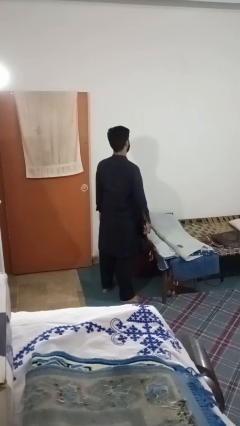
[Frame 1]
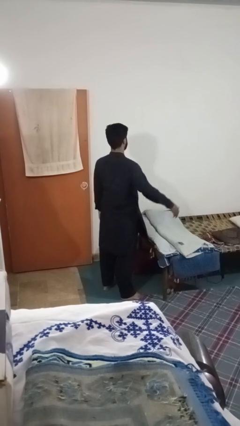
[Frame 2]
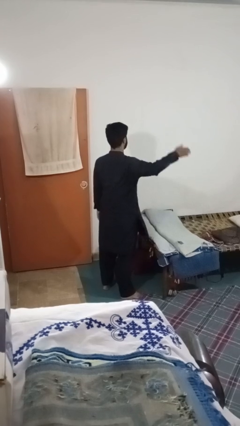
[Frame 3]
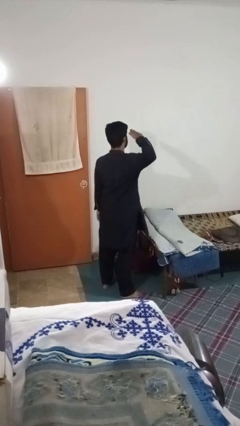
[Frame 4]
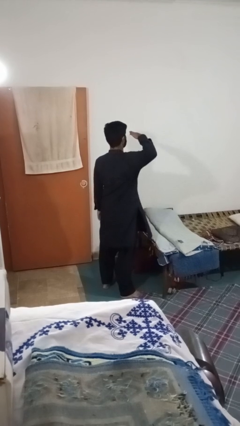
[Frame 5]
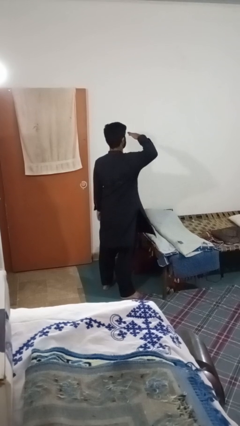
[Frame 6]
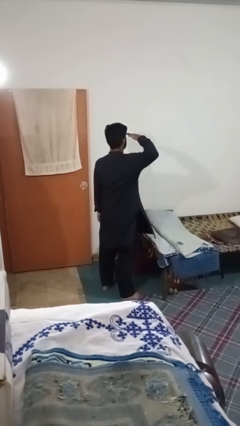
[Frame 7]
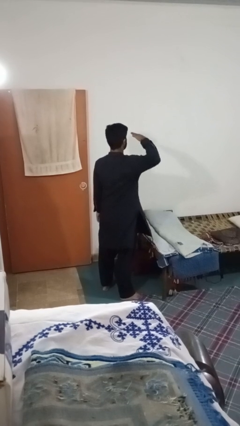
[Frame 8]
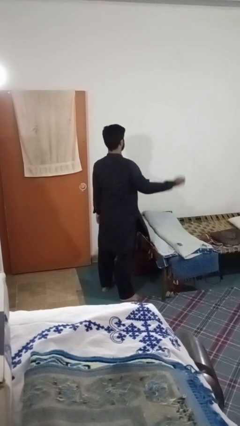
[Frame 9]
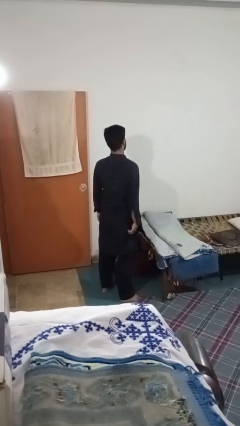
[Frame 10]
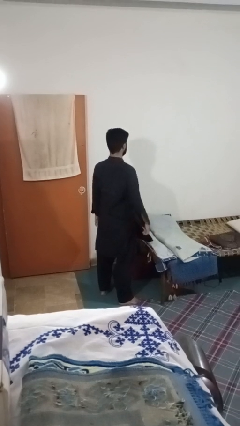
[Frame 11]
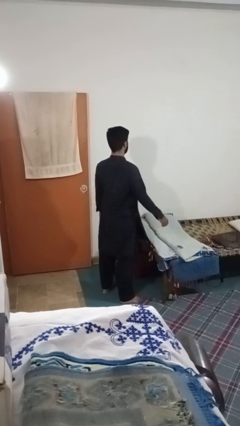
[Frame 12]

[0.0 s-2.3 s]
person salutes

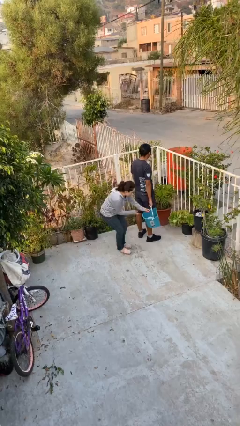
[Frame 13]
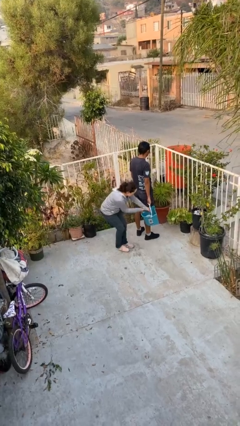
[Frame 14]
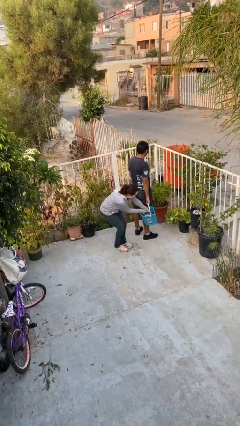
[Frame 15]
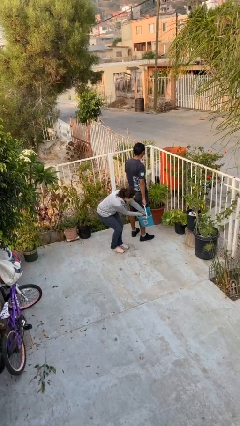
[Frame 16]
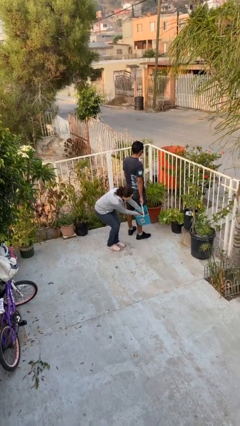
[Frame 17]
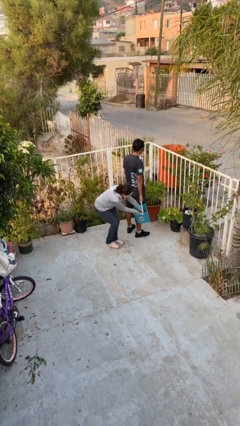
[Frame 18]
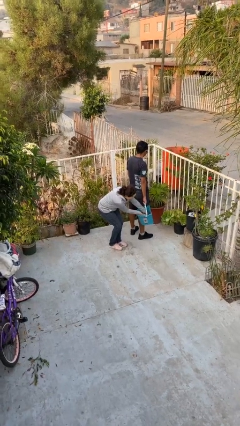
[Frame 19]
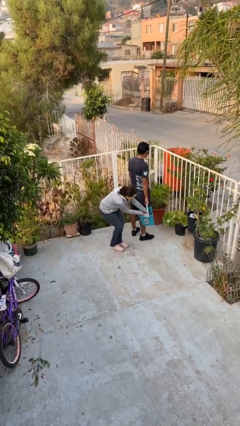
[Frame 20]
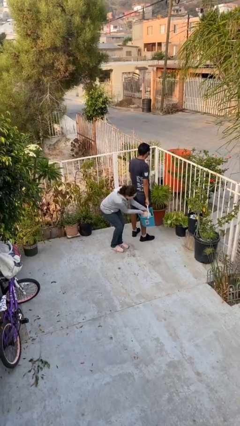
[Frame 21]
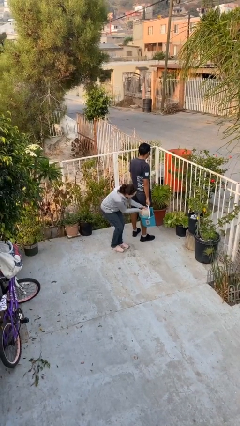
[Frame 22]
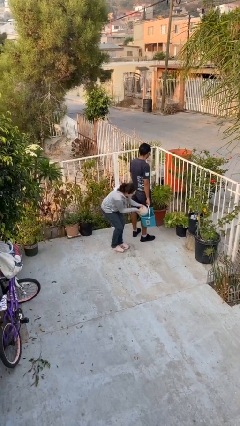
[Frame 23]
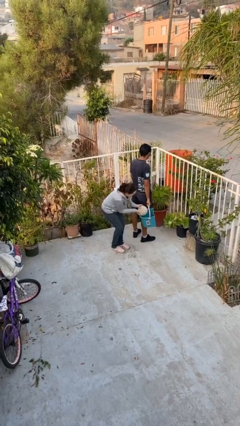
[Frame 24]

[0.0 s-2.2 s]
person steals object from person

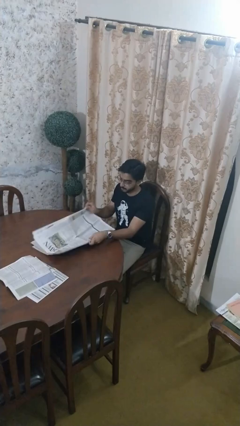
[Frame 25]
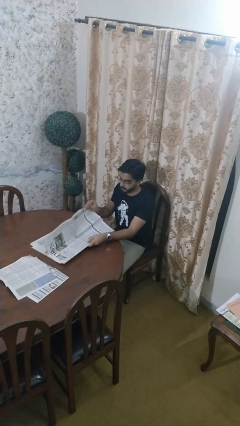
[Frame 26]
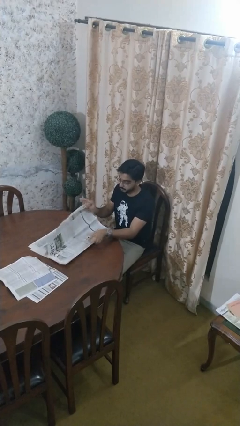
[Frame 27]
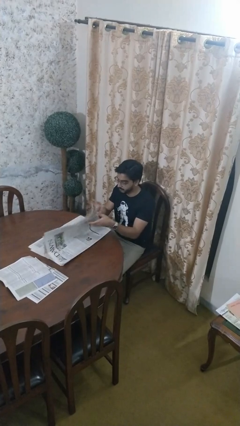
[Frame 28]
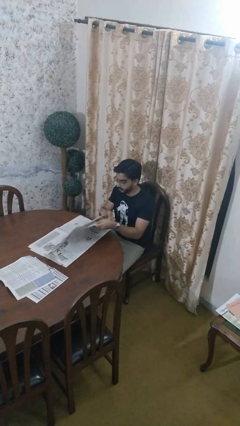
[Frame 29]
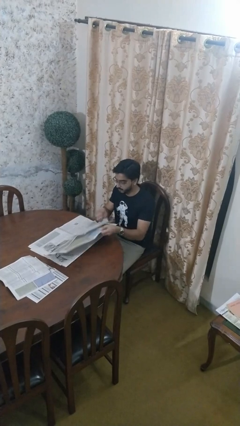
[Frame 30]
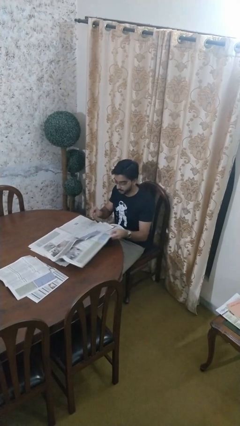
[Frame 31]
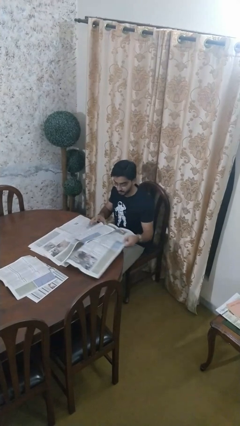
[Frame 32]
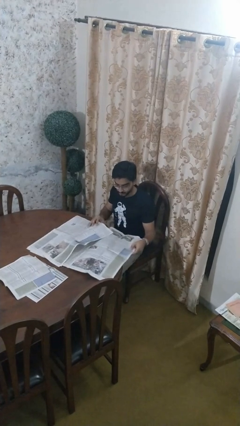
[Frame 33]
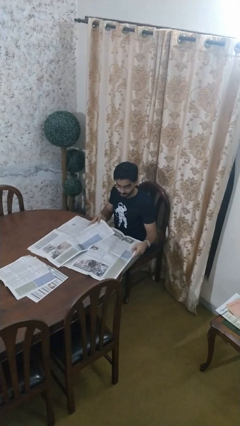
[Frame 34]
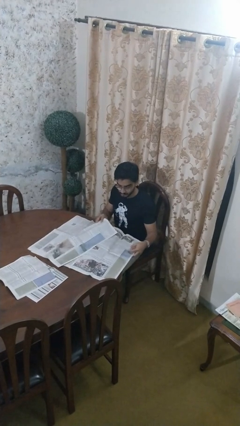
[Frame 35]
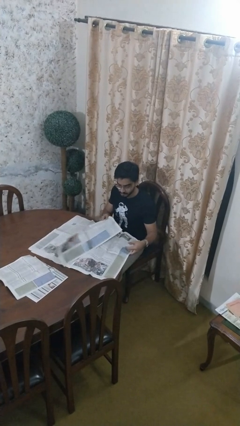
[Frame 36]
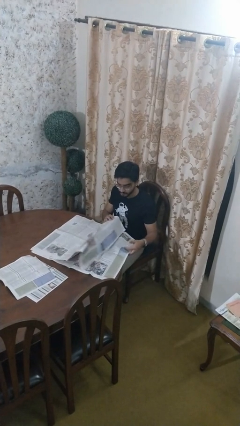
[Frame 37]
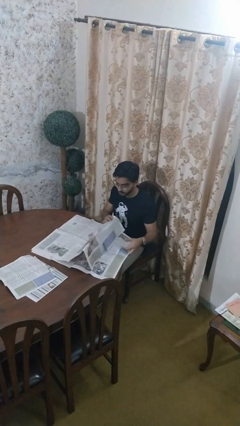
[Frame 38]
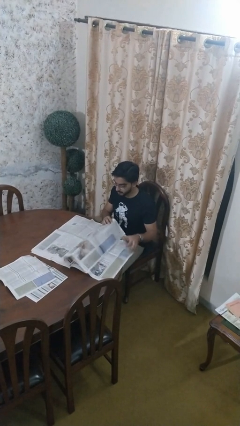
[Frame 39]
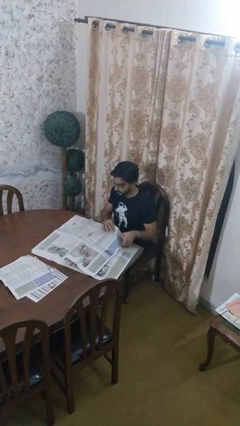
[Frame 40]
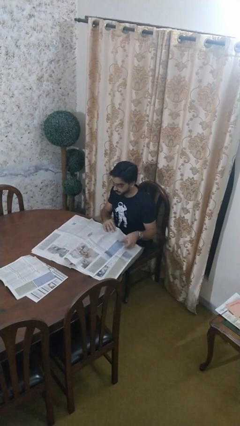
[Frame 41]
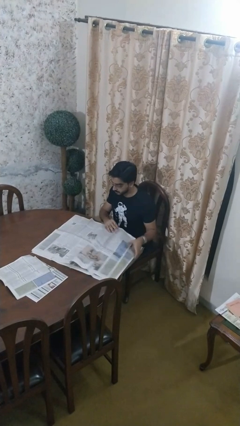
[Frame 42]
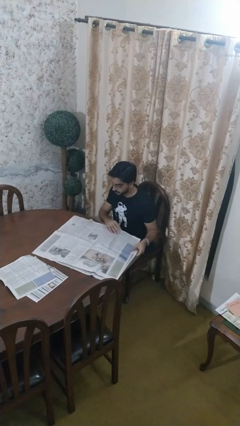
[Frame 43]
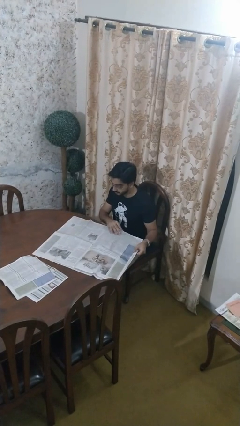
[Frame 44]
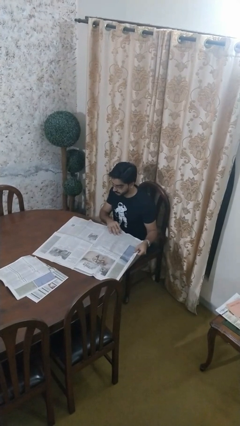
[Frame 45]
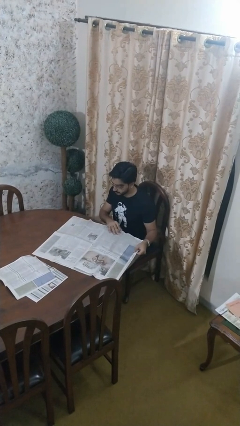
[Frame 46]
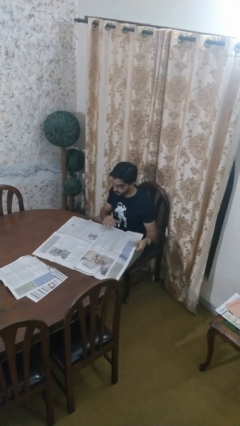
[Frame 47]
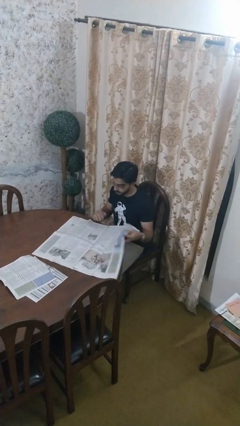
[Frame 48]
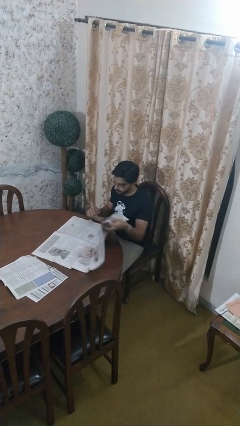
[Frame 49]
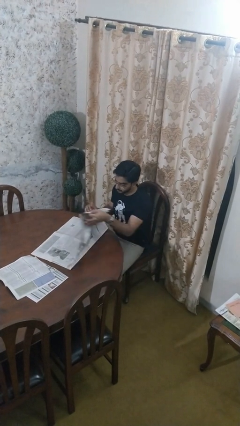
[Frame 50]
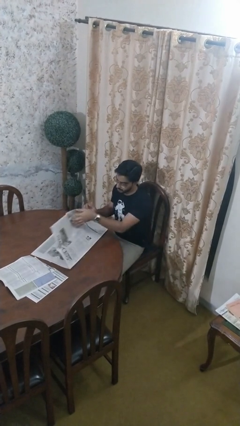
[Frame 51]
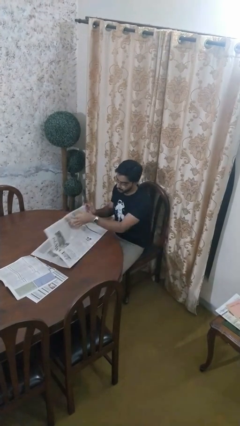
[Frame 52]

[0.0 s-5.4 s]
person reads newspaper

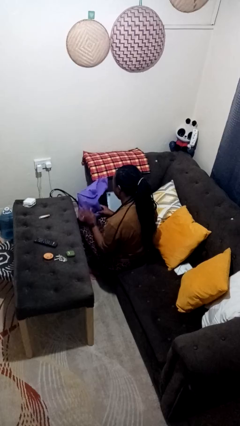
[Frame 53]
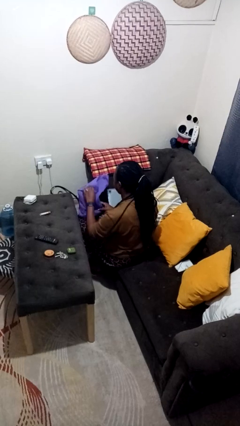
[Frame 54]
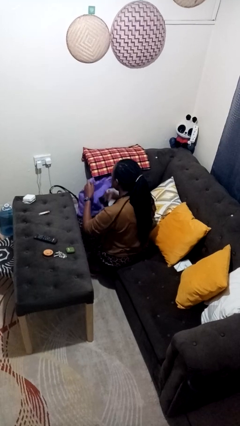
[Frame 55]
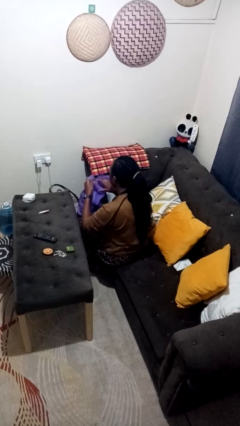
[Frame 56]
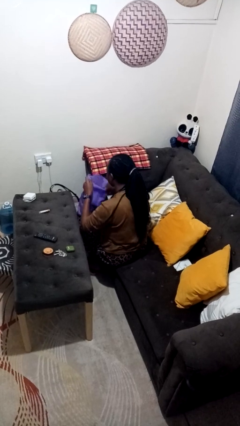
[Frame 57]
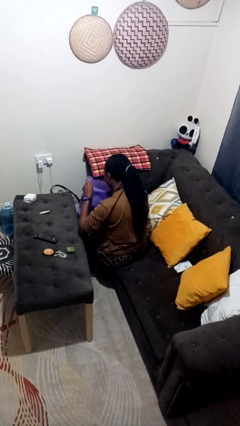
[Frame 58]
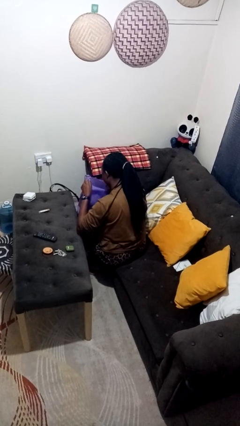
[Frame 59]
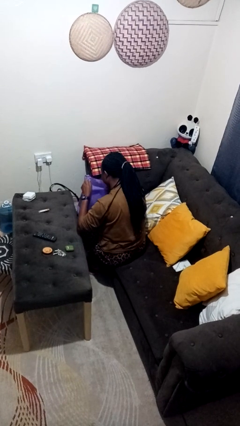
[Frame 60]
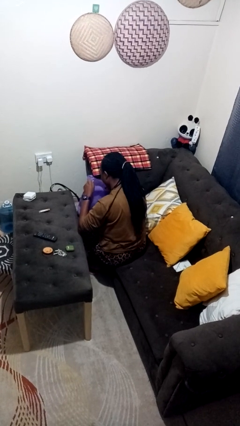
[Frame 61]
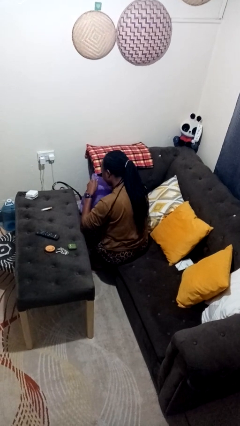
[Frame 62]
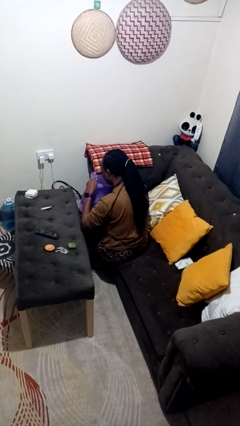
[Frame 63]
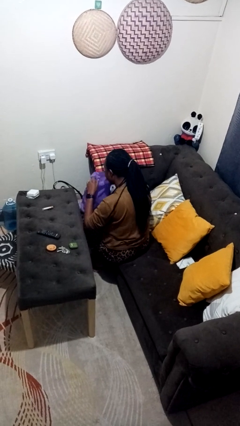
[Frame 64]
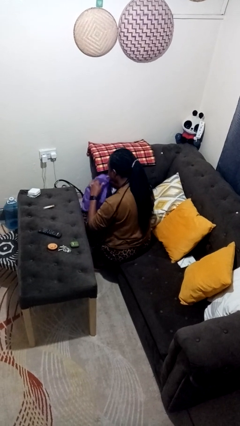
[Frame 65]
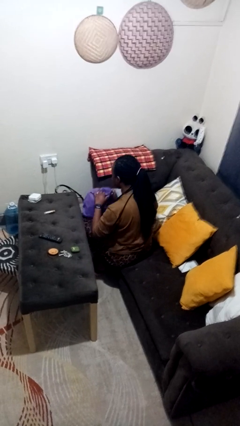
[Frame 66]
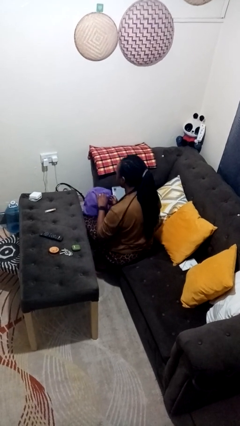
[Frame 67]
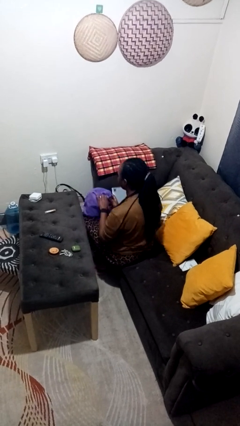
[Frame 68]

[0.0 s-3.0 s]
person searches in bag

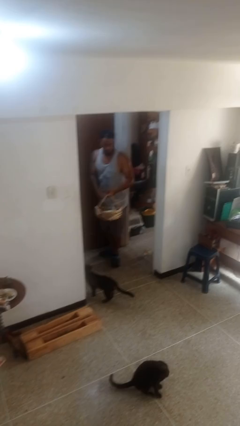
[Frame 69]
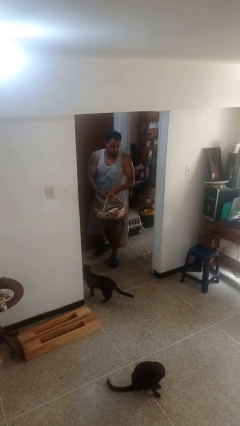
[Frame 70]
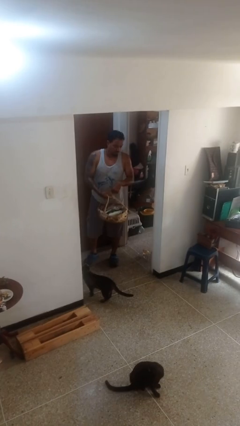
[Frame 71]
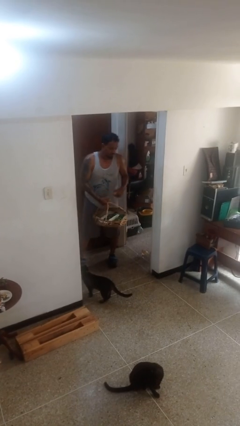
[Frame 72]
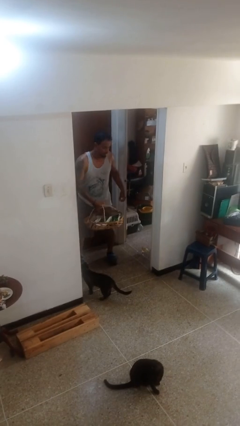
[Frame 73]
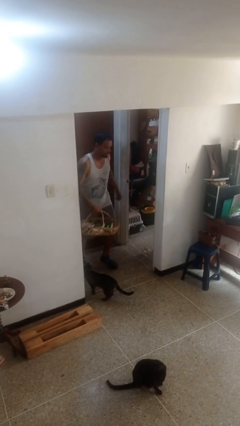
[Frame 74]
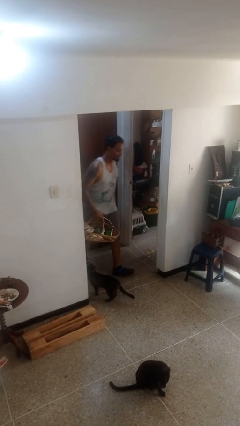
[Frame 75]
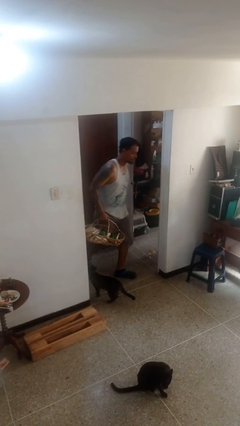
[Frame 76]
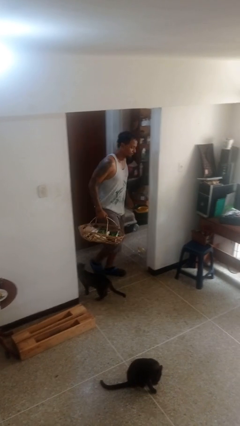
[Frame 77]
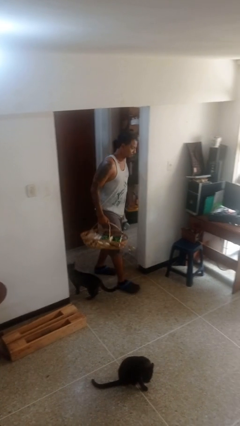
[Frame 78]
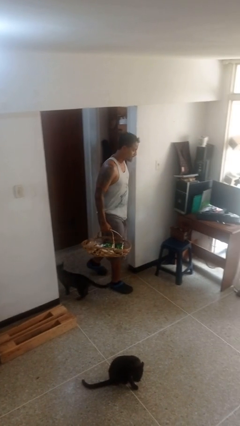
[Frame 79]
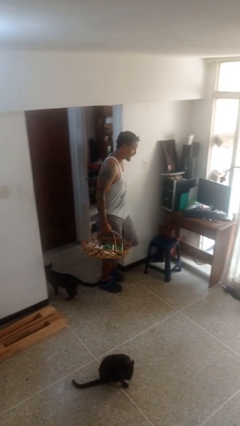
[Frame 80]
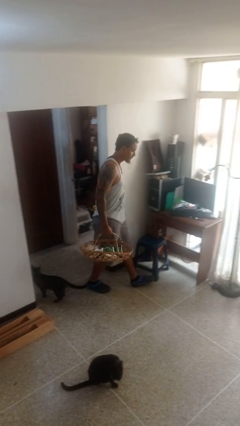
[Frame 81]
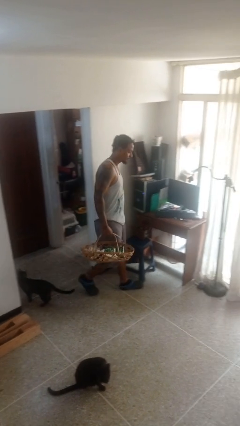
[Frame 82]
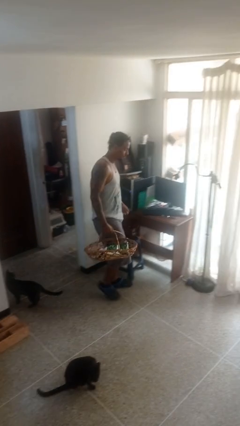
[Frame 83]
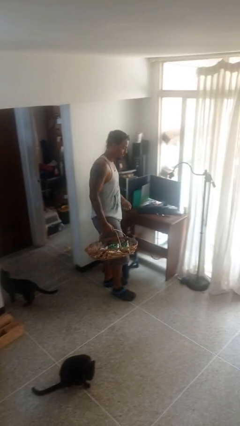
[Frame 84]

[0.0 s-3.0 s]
person carries groceries

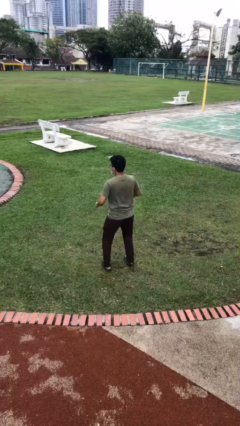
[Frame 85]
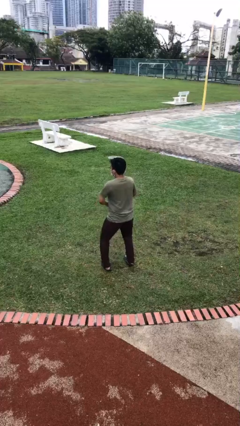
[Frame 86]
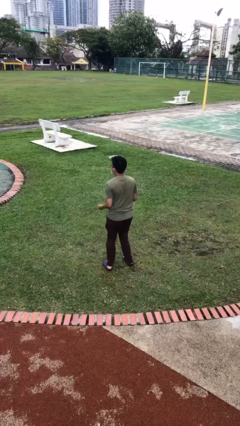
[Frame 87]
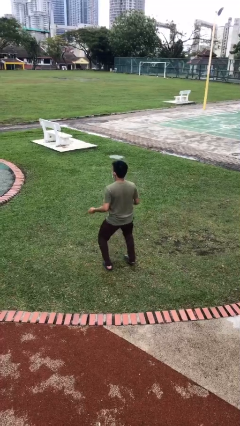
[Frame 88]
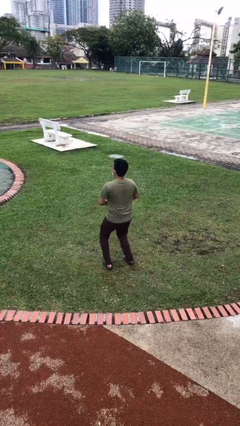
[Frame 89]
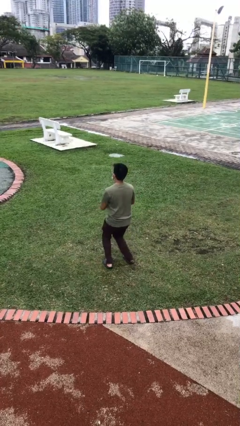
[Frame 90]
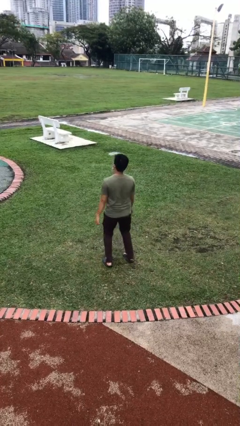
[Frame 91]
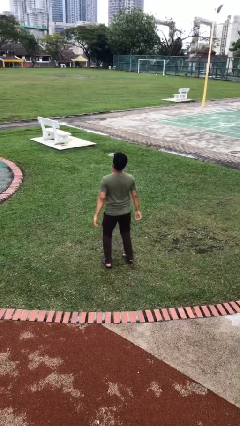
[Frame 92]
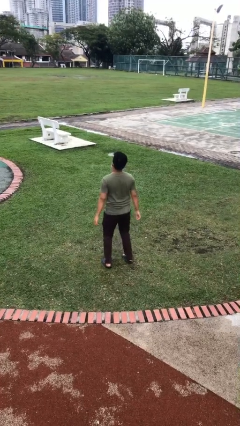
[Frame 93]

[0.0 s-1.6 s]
person dances in place

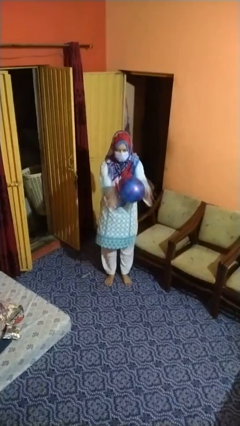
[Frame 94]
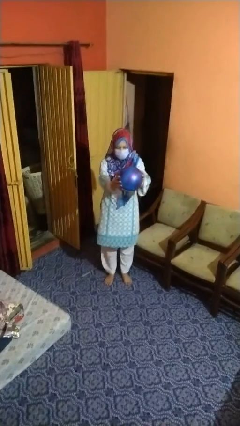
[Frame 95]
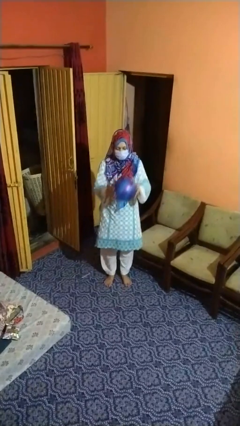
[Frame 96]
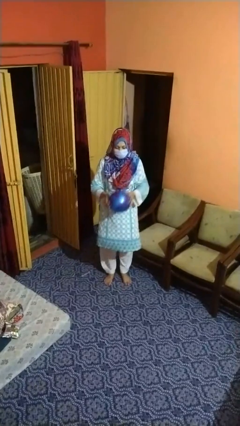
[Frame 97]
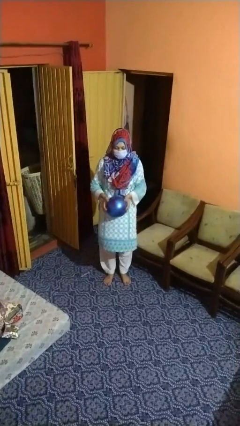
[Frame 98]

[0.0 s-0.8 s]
person bounces ball on floor
